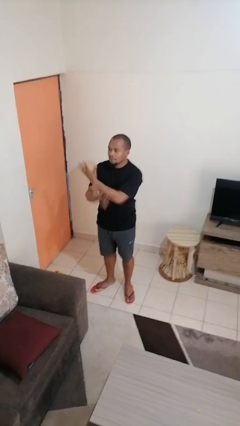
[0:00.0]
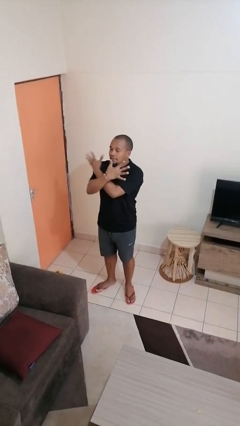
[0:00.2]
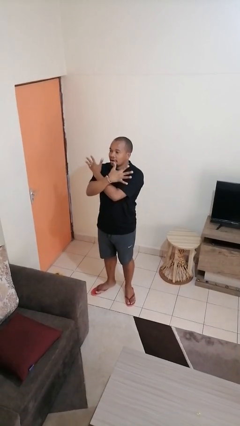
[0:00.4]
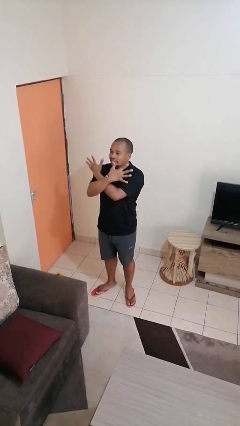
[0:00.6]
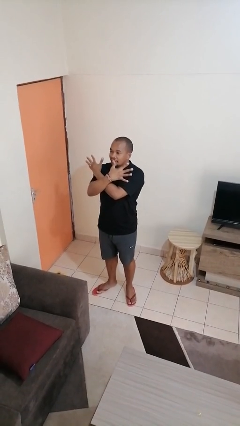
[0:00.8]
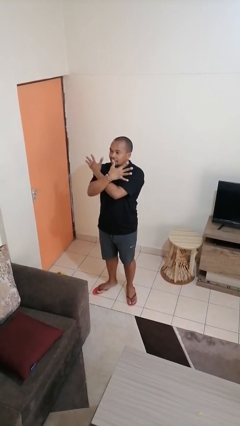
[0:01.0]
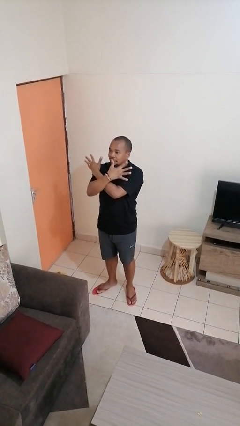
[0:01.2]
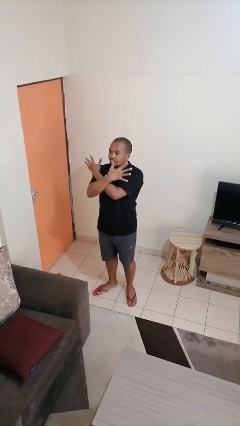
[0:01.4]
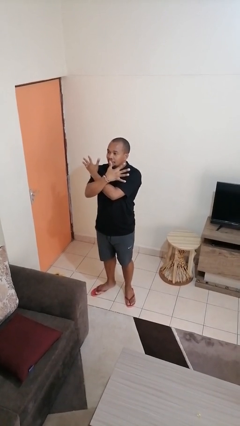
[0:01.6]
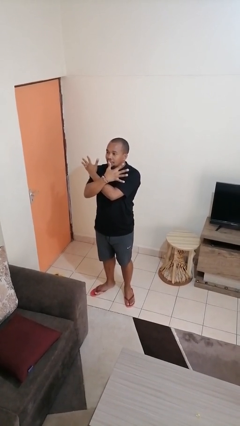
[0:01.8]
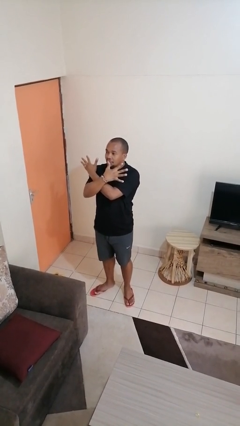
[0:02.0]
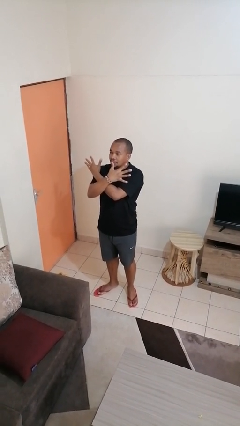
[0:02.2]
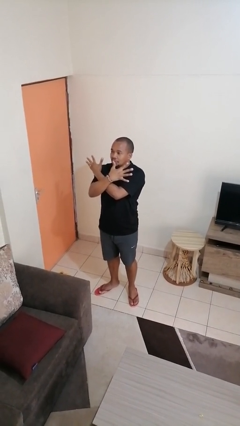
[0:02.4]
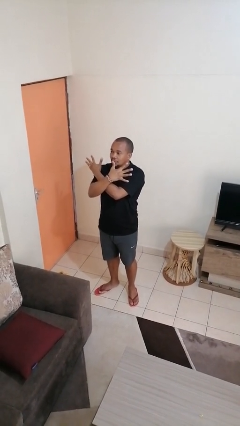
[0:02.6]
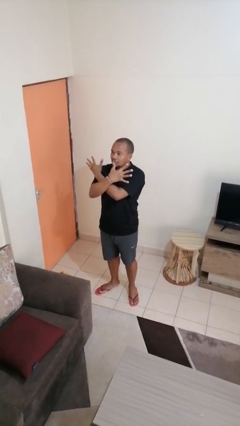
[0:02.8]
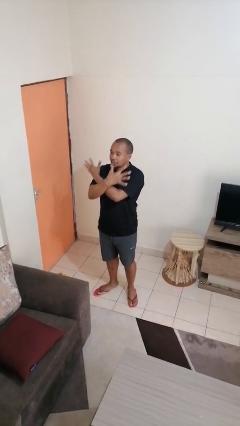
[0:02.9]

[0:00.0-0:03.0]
person gestures arms x

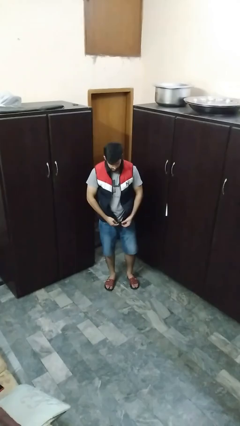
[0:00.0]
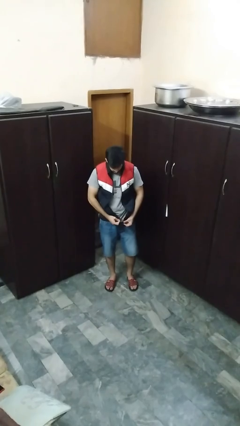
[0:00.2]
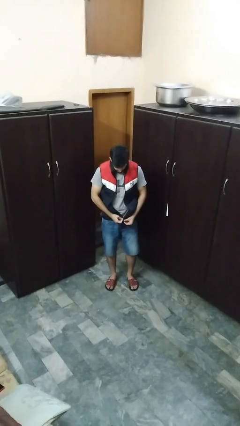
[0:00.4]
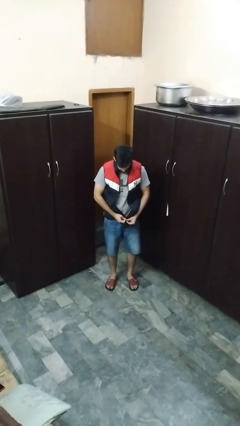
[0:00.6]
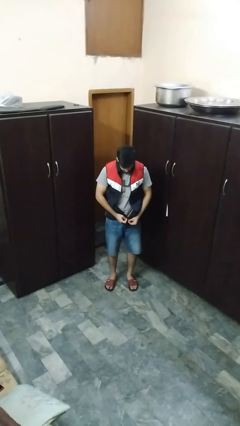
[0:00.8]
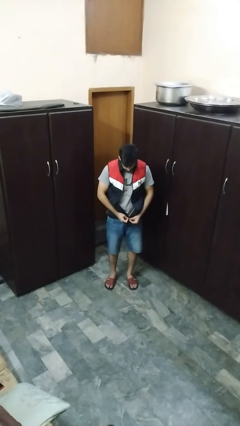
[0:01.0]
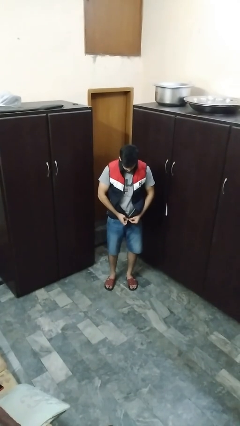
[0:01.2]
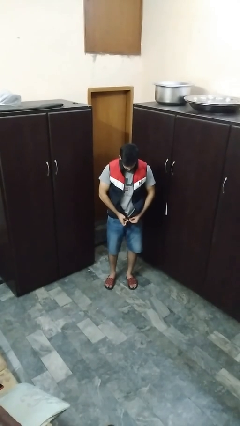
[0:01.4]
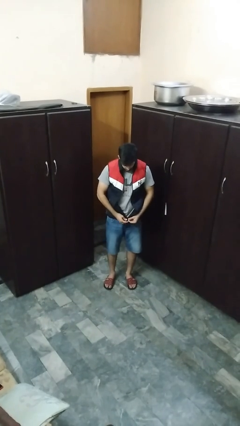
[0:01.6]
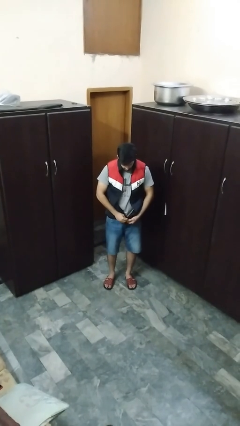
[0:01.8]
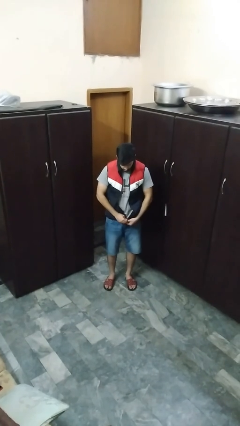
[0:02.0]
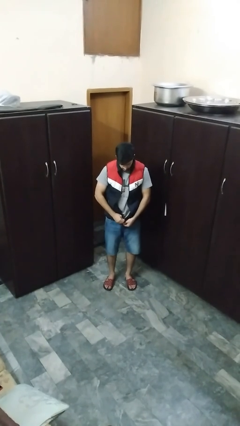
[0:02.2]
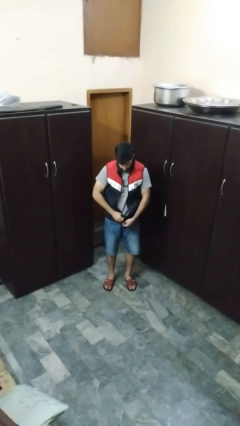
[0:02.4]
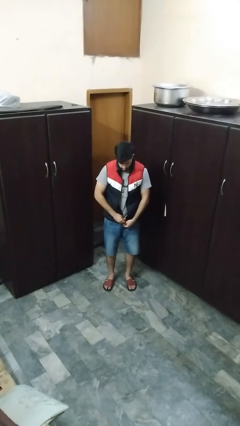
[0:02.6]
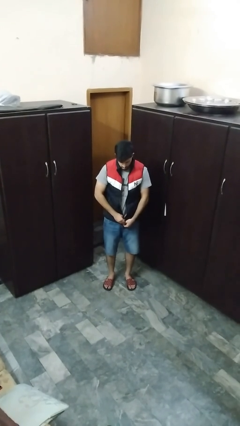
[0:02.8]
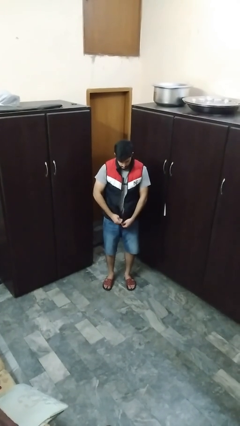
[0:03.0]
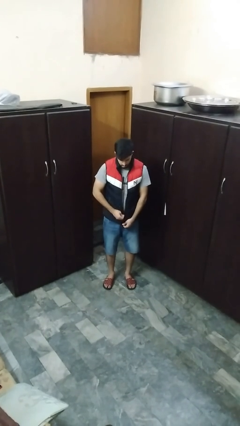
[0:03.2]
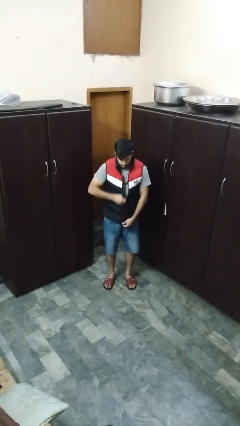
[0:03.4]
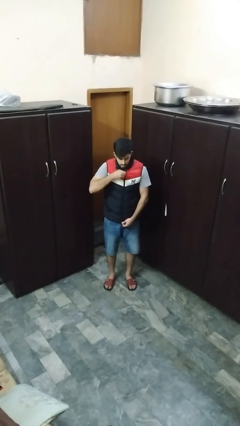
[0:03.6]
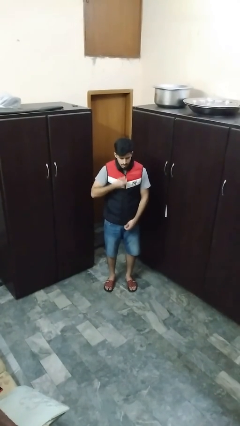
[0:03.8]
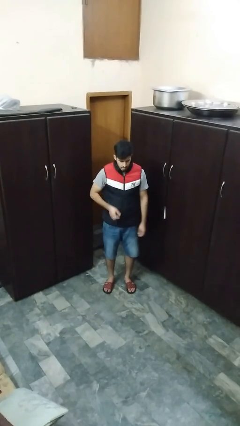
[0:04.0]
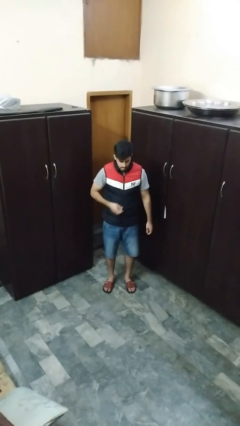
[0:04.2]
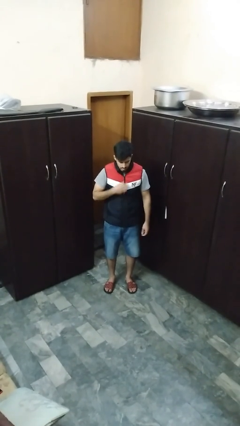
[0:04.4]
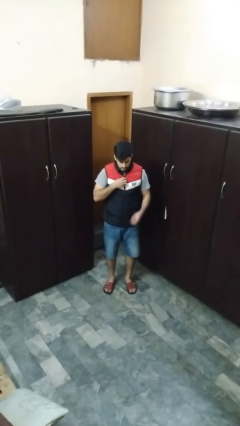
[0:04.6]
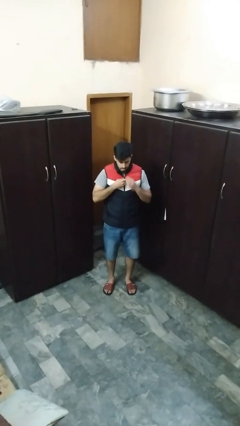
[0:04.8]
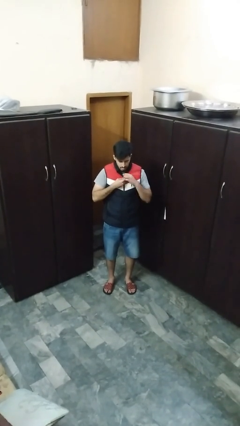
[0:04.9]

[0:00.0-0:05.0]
person zips up jacket

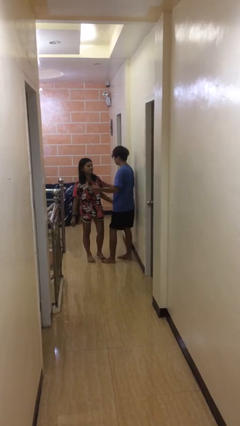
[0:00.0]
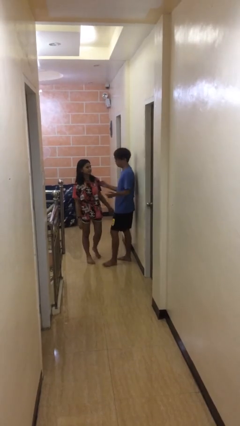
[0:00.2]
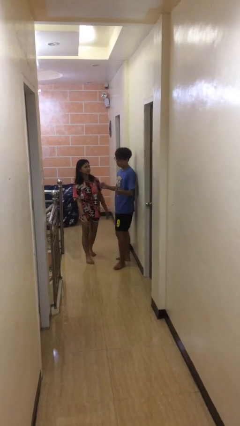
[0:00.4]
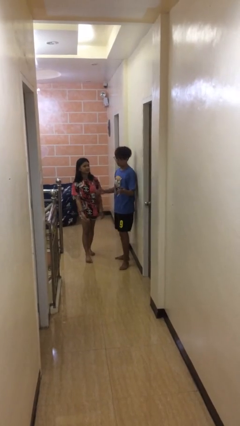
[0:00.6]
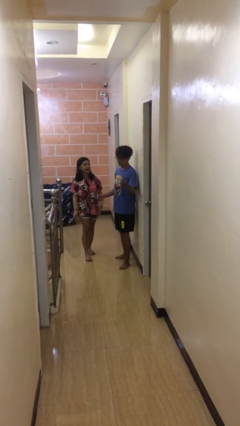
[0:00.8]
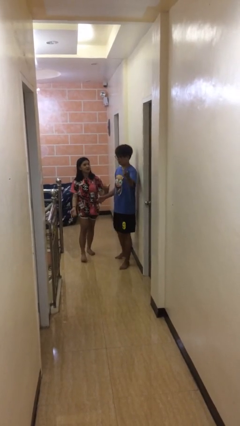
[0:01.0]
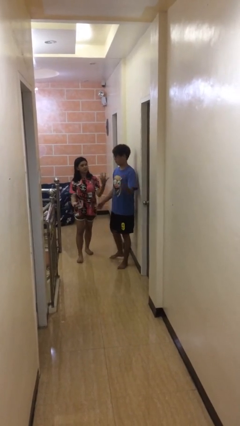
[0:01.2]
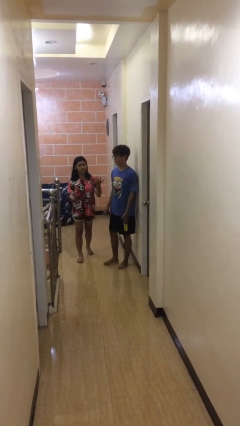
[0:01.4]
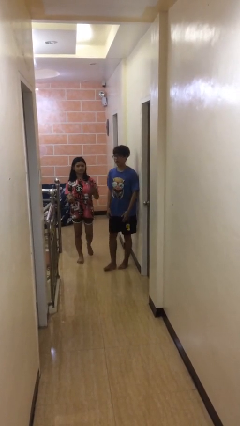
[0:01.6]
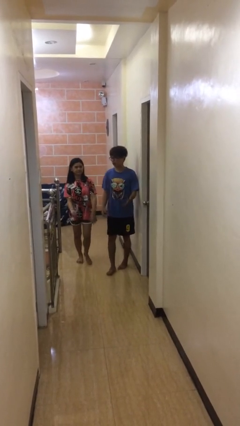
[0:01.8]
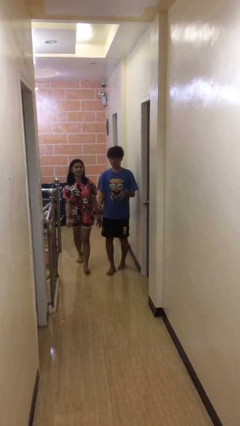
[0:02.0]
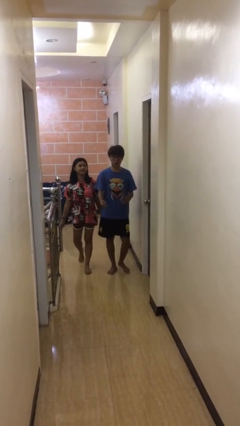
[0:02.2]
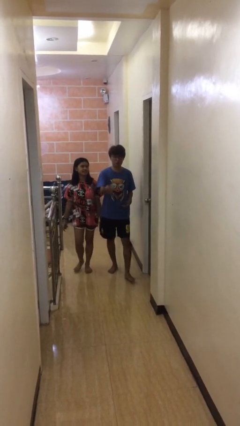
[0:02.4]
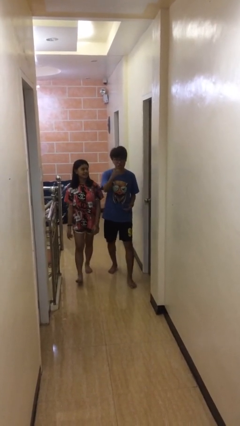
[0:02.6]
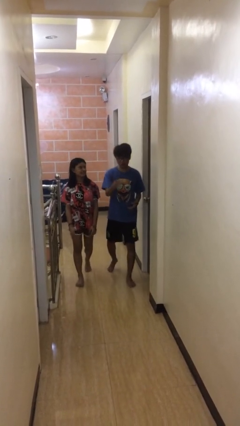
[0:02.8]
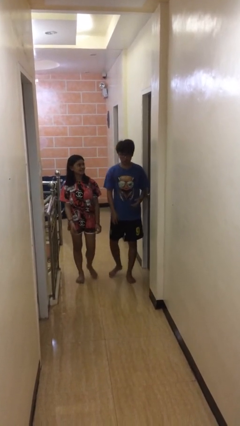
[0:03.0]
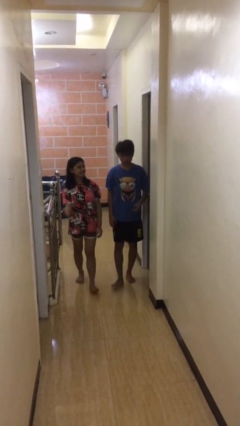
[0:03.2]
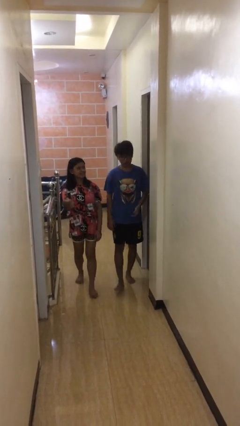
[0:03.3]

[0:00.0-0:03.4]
person talks to person

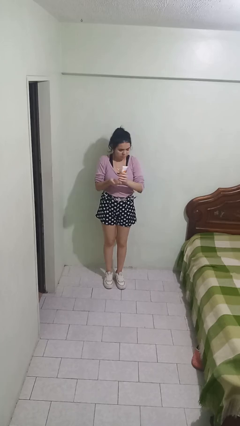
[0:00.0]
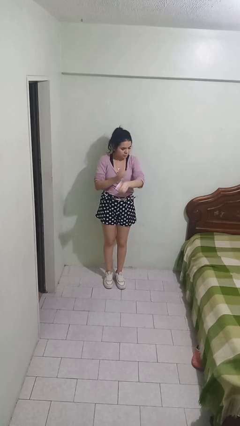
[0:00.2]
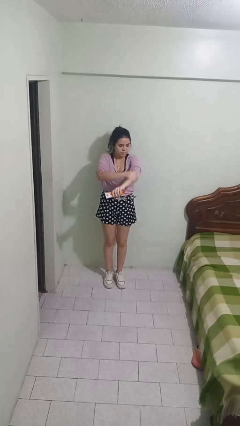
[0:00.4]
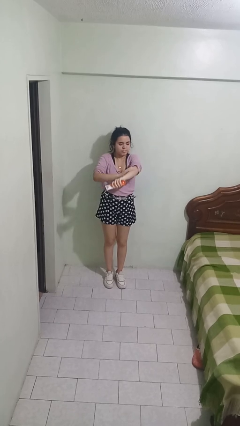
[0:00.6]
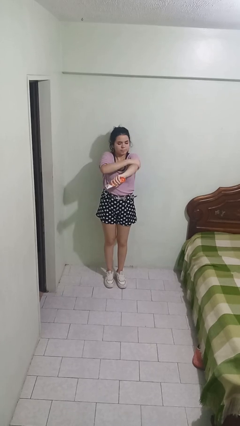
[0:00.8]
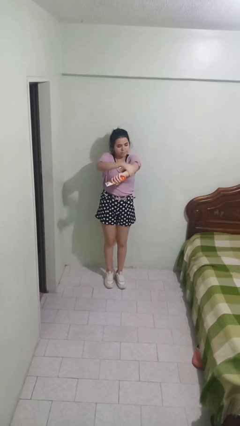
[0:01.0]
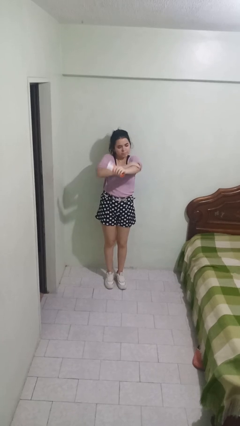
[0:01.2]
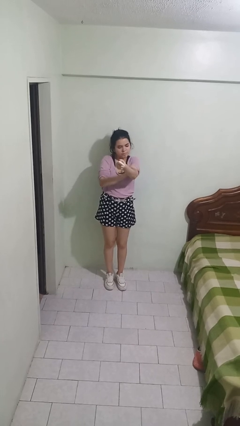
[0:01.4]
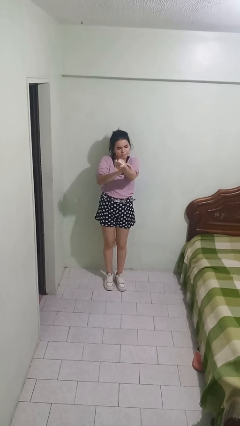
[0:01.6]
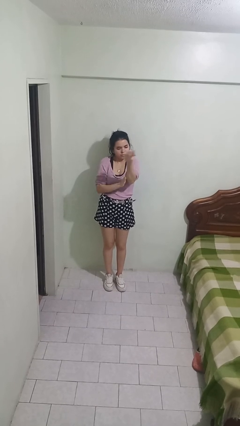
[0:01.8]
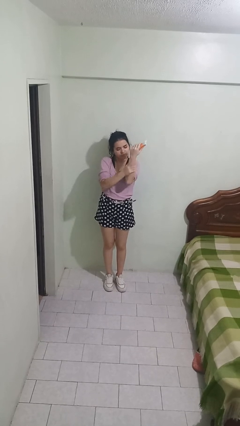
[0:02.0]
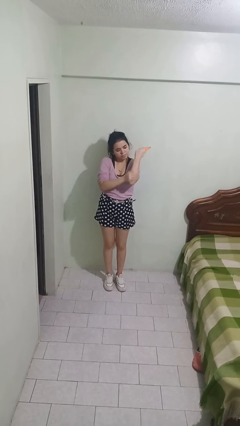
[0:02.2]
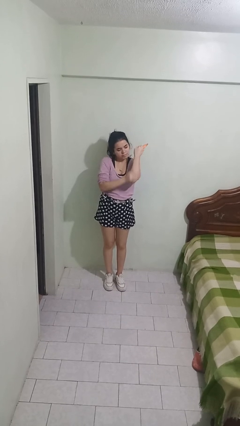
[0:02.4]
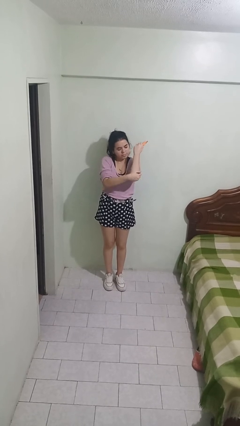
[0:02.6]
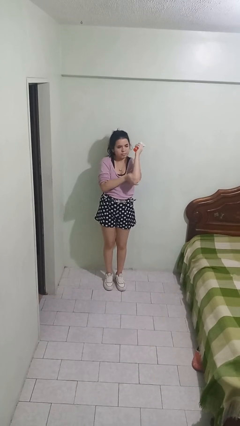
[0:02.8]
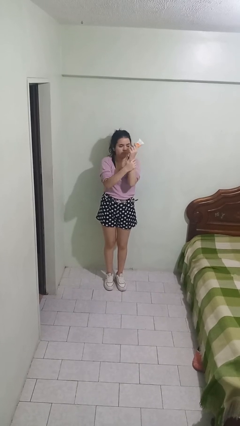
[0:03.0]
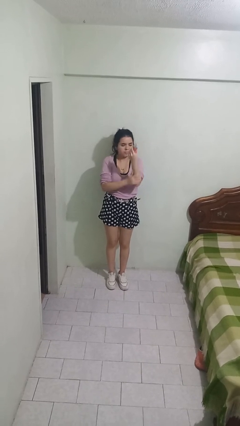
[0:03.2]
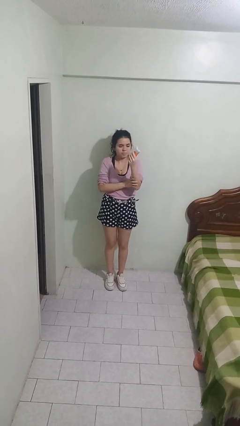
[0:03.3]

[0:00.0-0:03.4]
person applies sunscreen

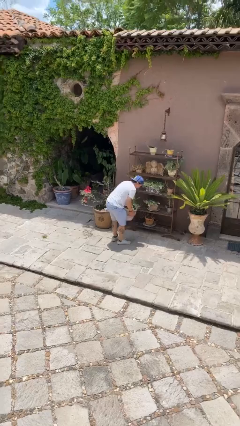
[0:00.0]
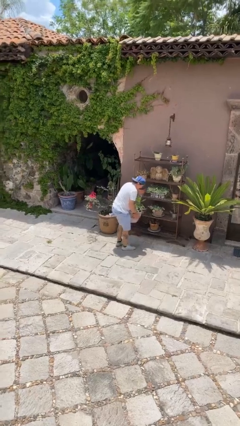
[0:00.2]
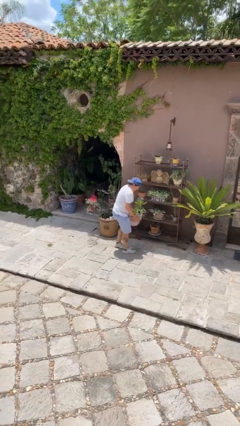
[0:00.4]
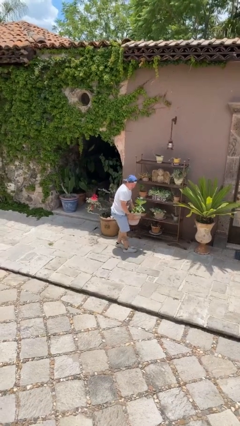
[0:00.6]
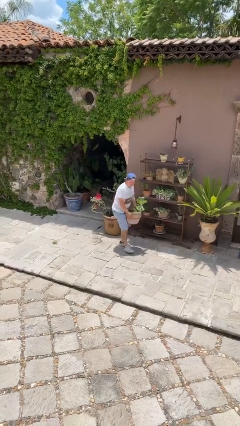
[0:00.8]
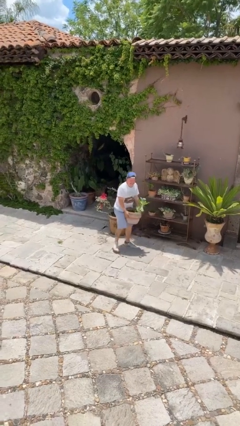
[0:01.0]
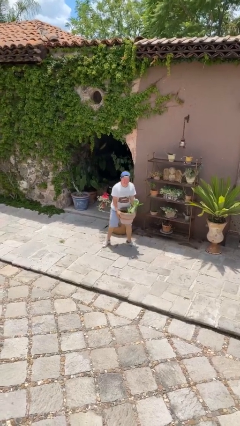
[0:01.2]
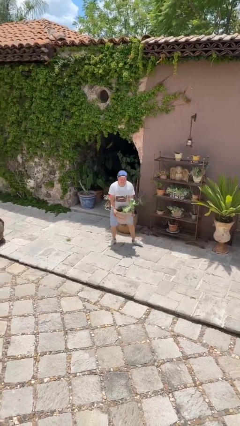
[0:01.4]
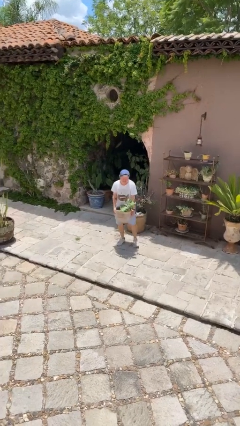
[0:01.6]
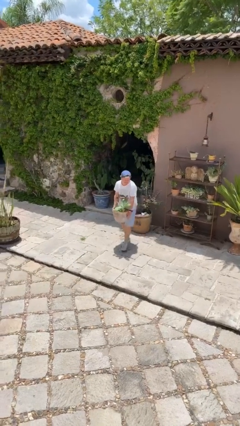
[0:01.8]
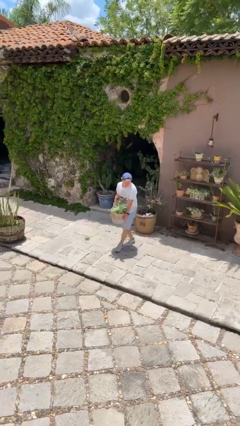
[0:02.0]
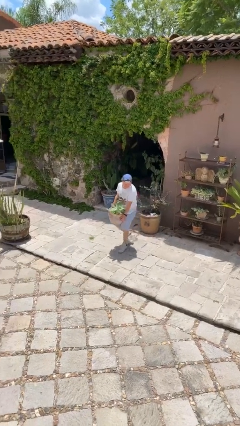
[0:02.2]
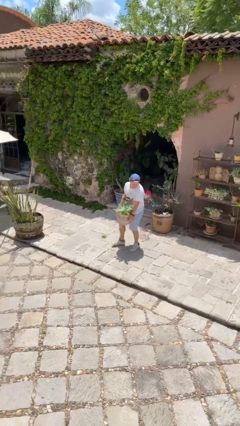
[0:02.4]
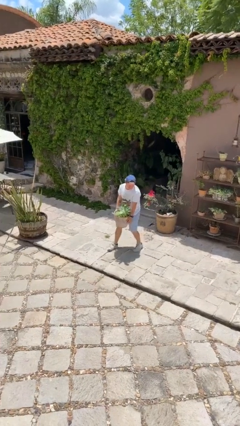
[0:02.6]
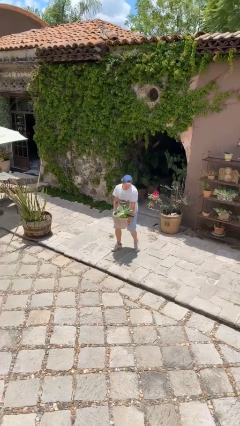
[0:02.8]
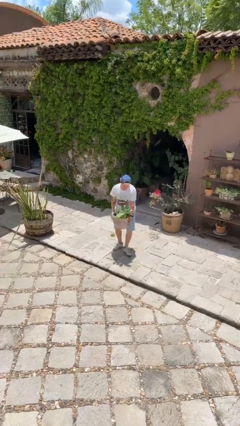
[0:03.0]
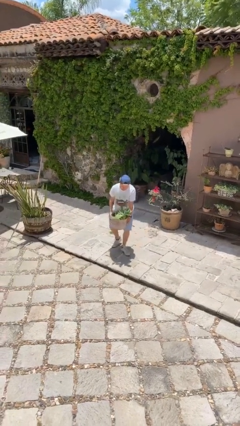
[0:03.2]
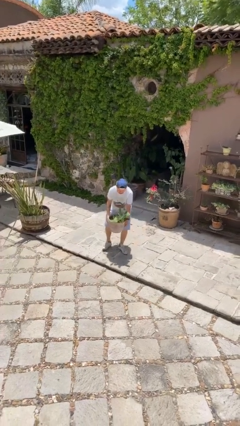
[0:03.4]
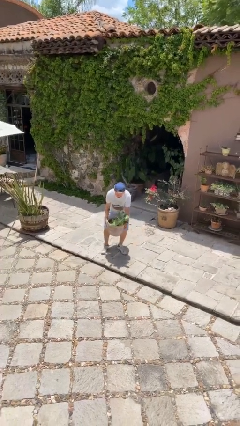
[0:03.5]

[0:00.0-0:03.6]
person carries heavy object
